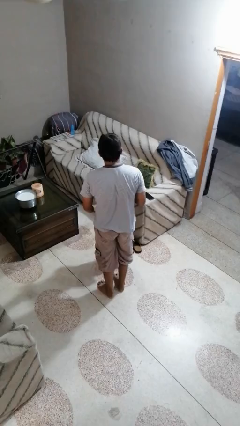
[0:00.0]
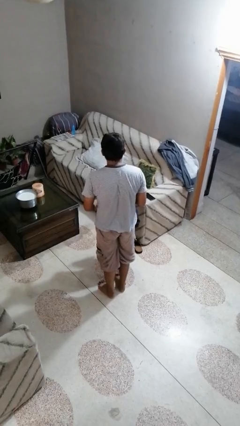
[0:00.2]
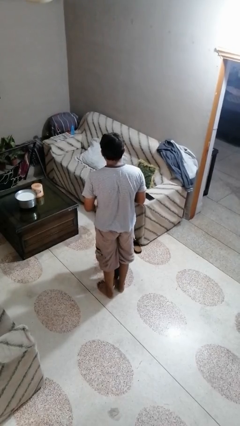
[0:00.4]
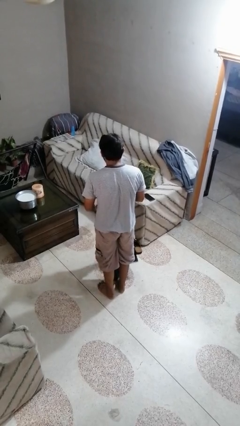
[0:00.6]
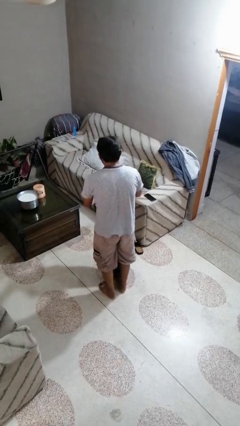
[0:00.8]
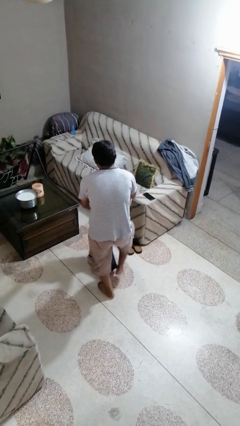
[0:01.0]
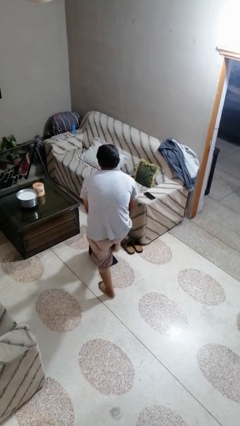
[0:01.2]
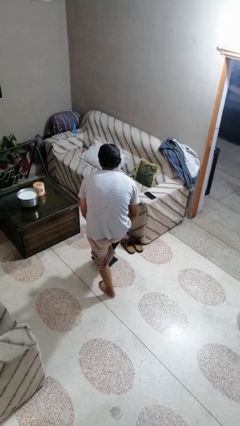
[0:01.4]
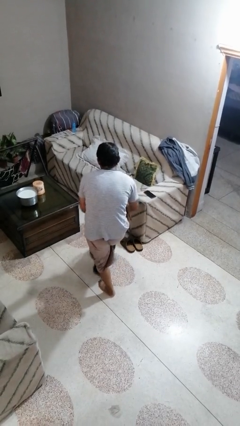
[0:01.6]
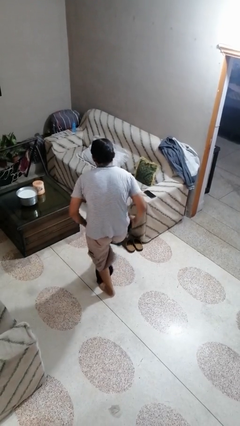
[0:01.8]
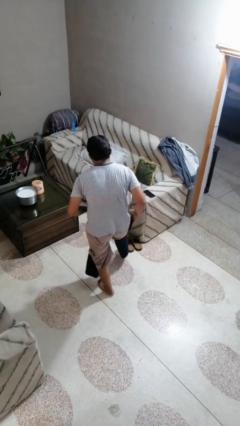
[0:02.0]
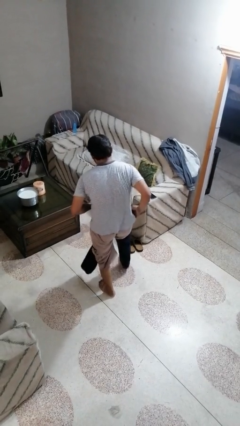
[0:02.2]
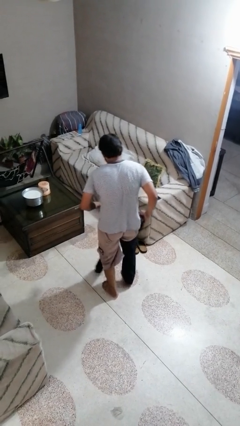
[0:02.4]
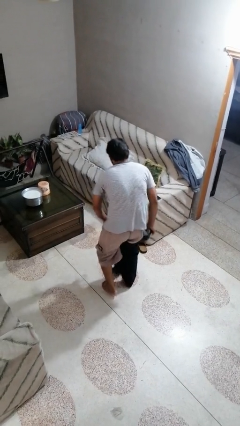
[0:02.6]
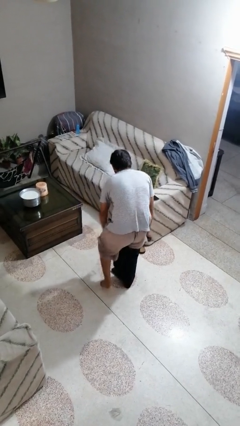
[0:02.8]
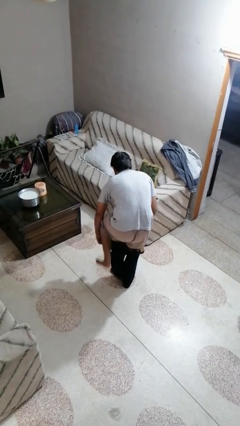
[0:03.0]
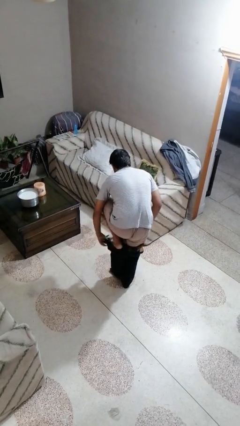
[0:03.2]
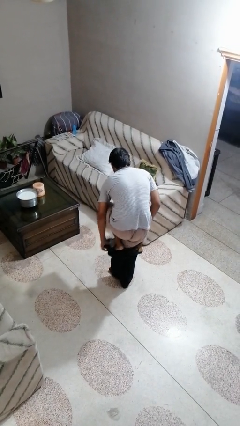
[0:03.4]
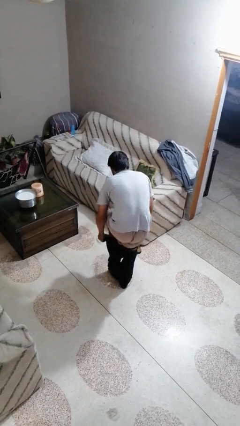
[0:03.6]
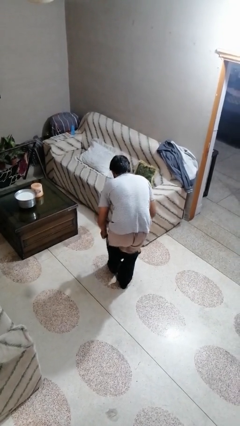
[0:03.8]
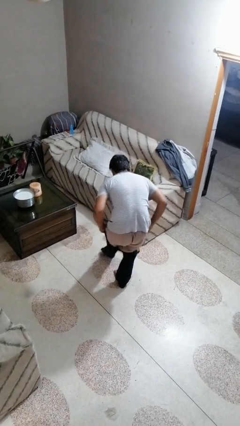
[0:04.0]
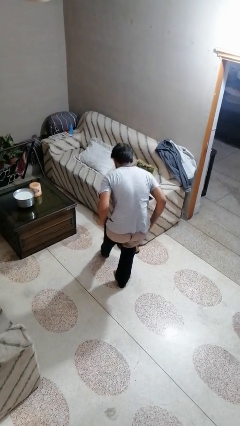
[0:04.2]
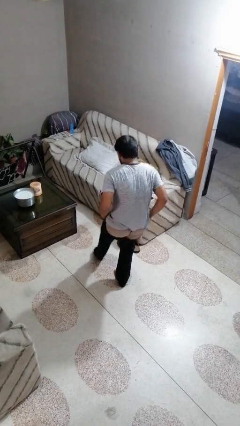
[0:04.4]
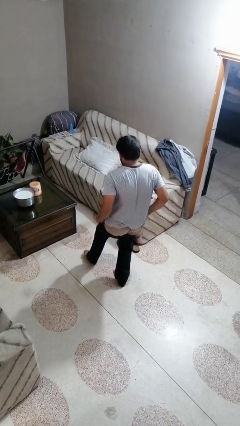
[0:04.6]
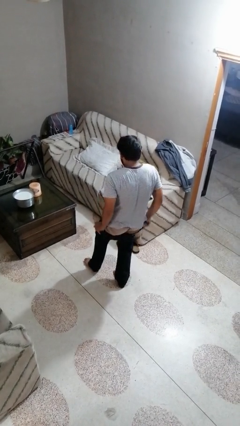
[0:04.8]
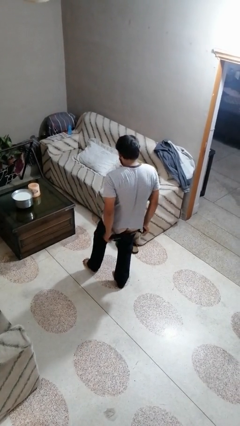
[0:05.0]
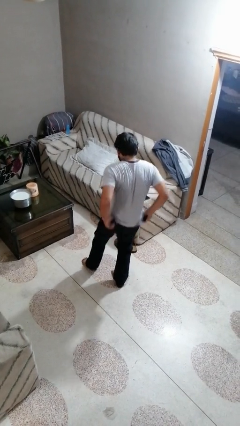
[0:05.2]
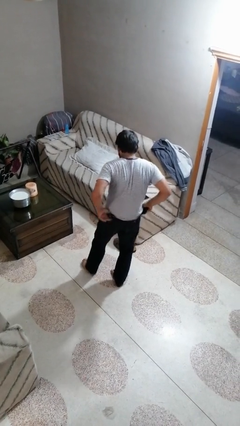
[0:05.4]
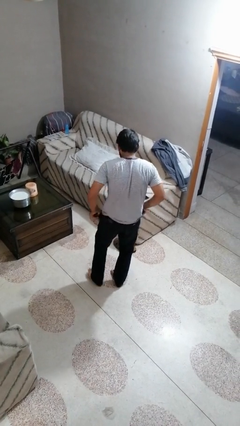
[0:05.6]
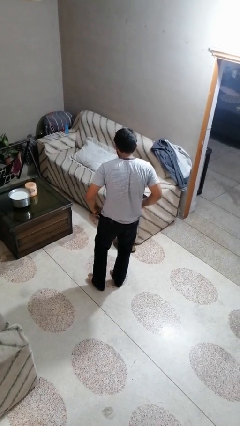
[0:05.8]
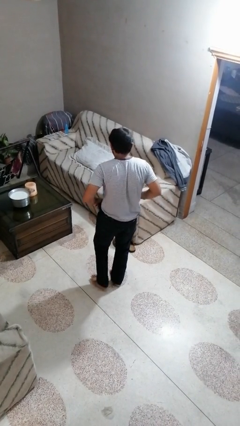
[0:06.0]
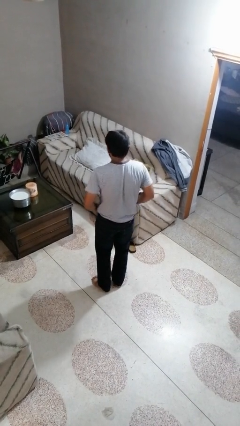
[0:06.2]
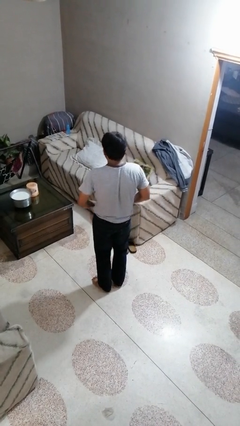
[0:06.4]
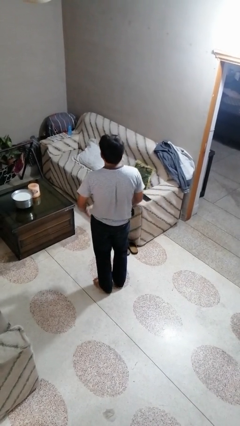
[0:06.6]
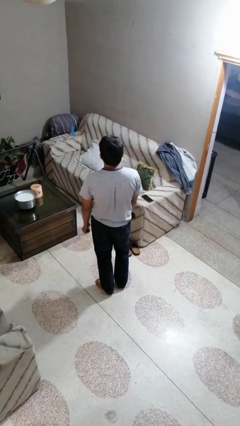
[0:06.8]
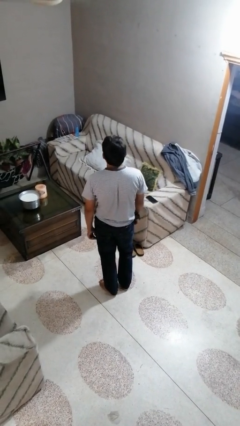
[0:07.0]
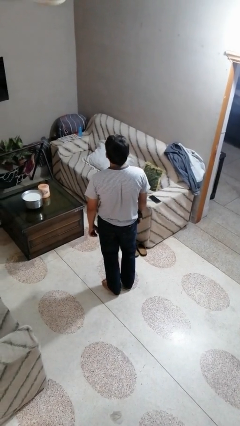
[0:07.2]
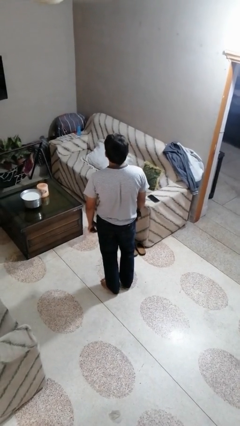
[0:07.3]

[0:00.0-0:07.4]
person puts on pants

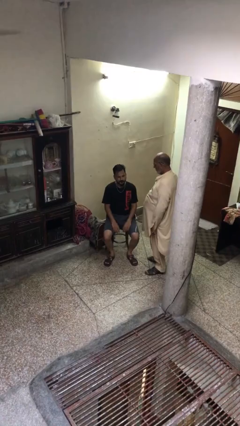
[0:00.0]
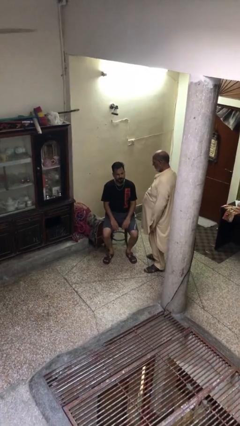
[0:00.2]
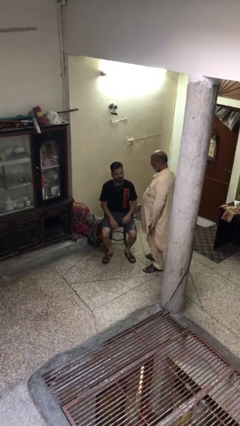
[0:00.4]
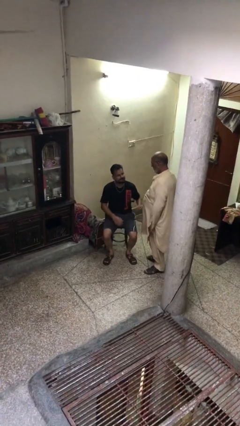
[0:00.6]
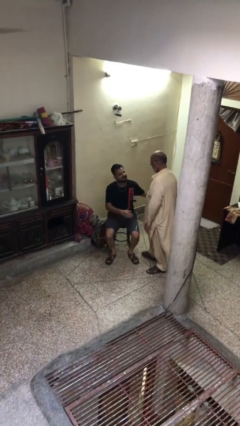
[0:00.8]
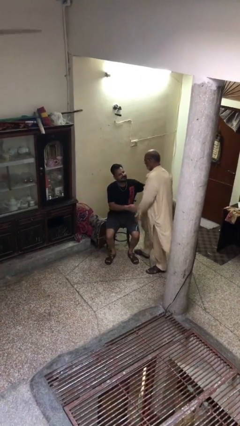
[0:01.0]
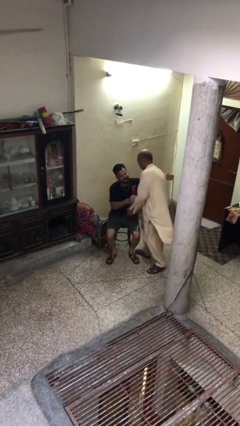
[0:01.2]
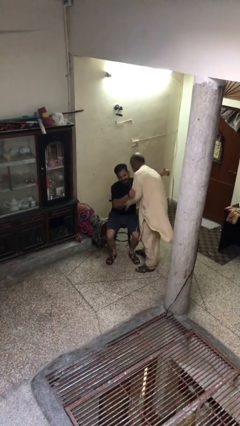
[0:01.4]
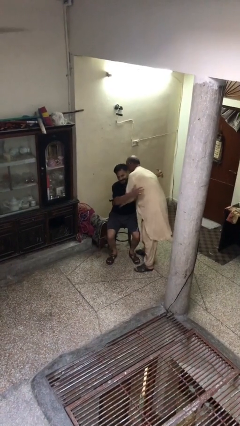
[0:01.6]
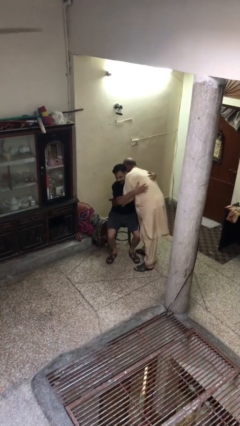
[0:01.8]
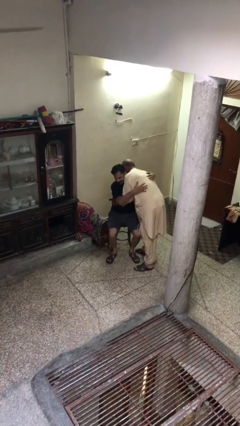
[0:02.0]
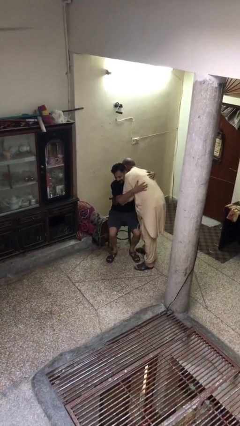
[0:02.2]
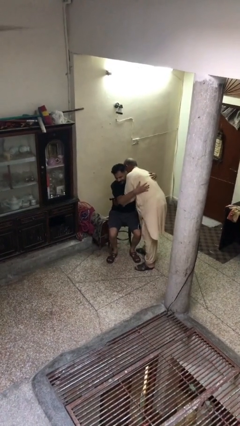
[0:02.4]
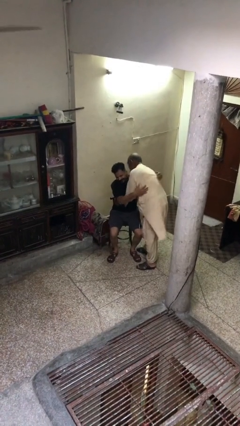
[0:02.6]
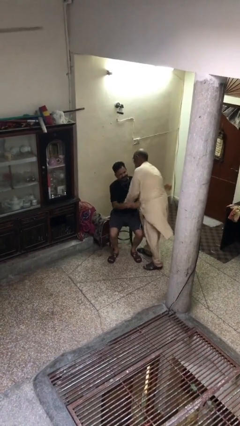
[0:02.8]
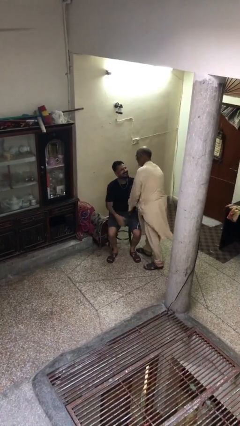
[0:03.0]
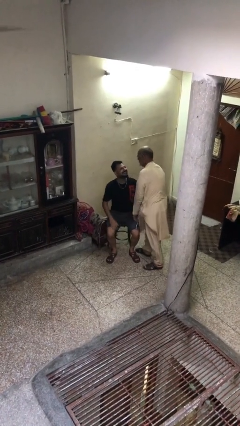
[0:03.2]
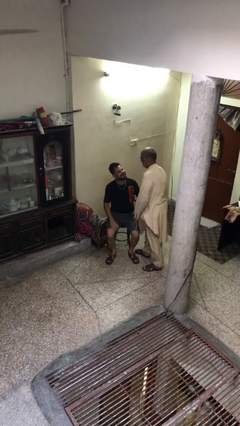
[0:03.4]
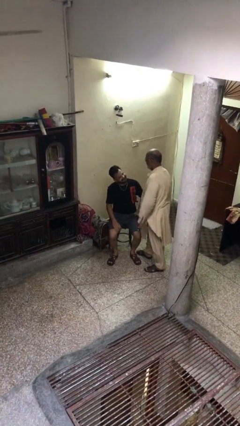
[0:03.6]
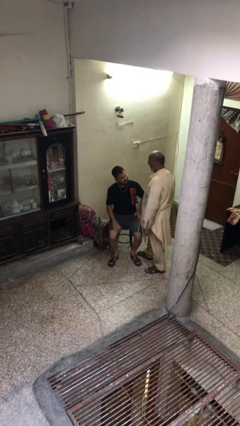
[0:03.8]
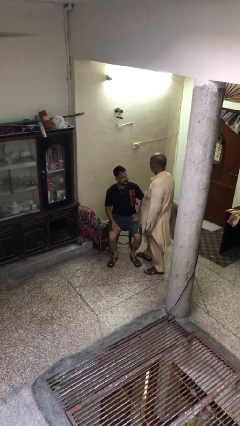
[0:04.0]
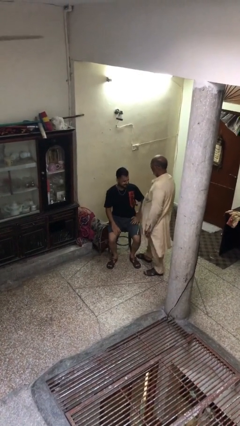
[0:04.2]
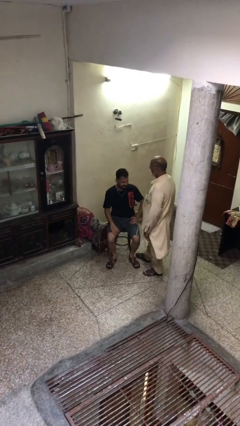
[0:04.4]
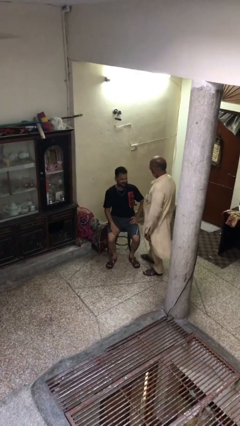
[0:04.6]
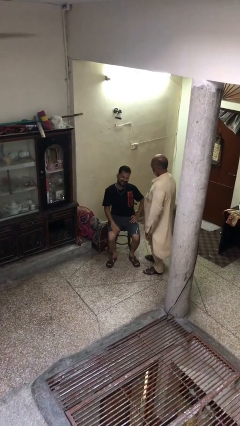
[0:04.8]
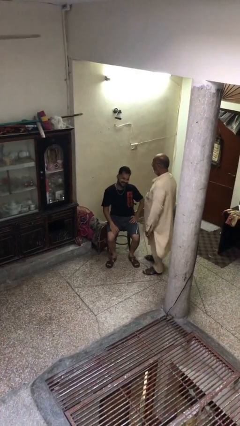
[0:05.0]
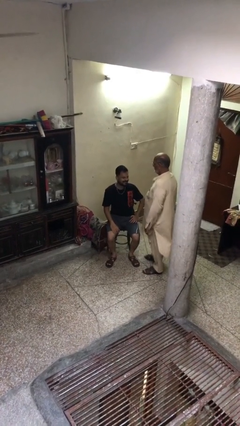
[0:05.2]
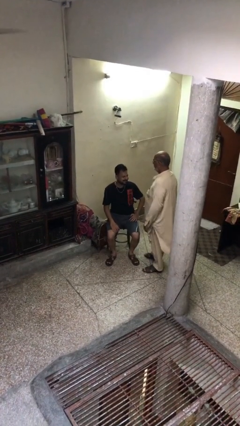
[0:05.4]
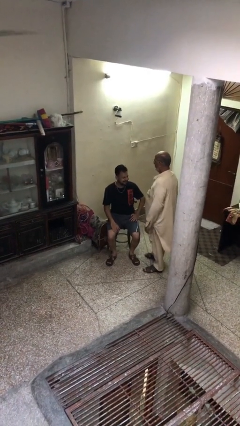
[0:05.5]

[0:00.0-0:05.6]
person embraces person

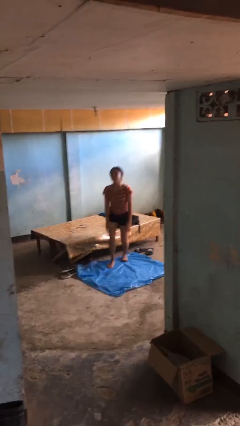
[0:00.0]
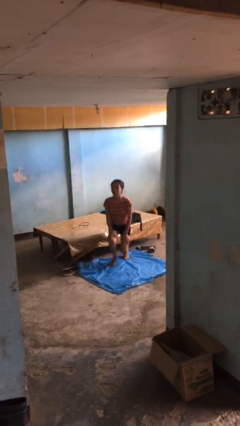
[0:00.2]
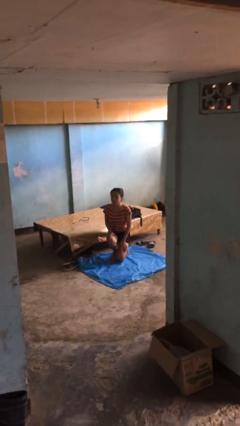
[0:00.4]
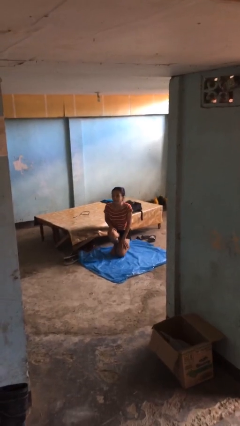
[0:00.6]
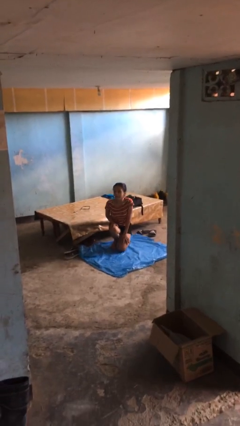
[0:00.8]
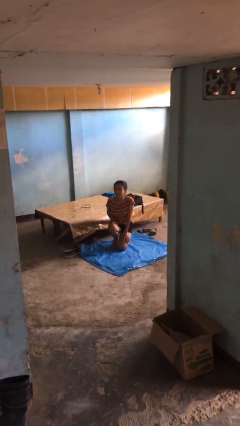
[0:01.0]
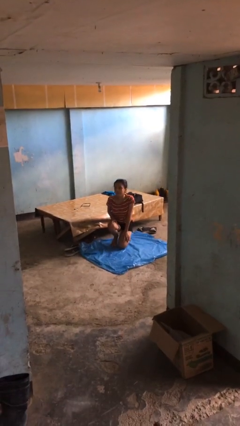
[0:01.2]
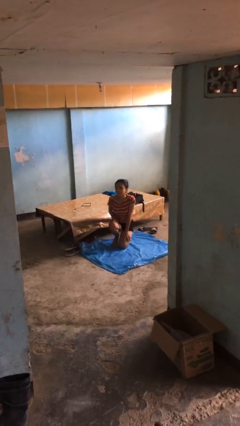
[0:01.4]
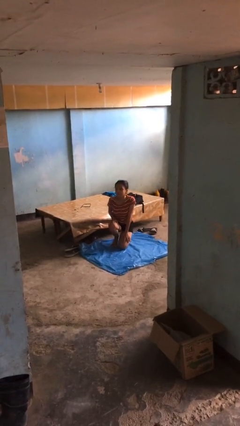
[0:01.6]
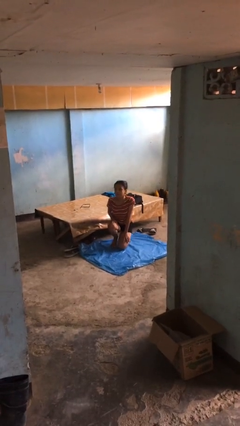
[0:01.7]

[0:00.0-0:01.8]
person kneels

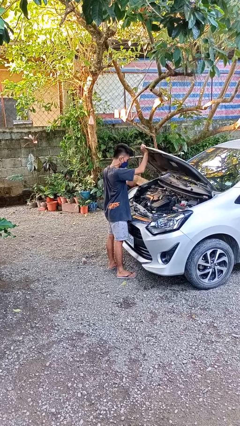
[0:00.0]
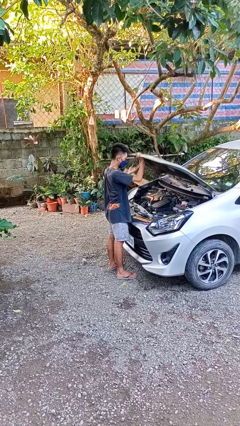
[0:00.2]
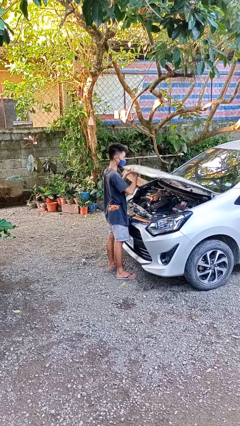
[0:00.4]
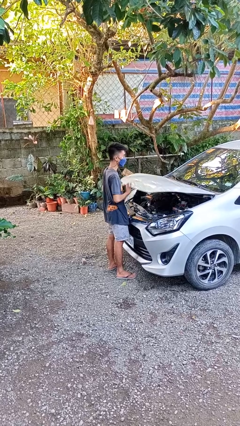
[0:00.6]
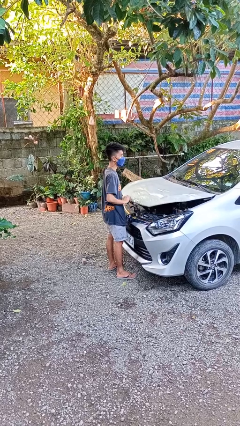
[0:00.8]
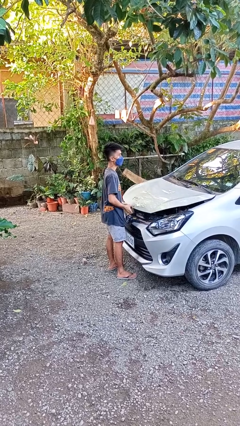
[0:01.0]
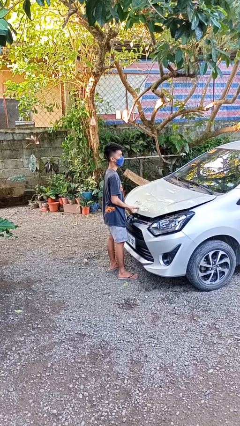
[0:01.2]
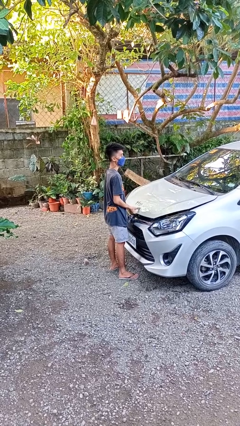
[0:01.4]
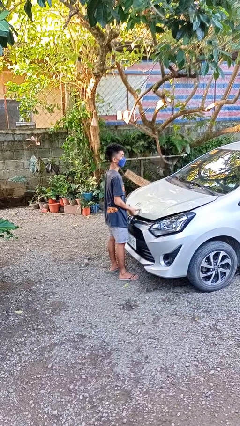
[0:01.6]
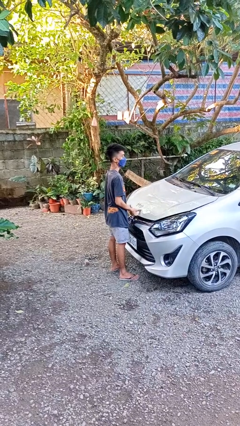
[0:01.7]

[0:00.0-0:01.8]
person closes car hood

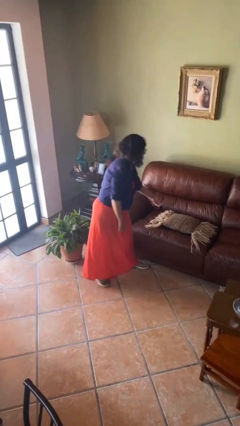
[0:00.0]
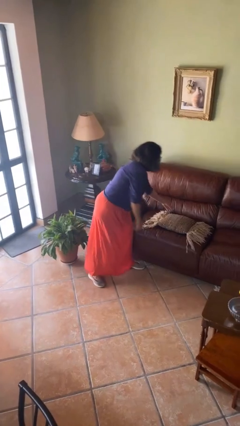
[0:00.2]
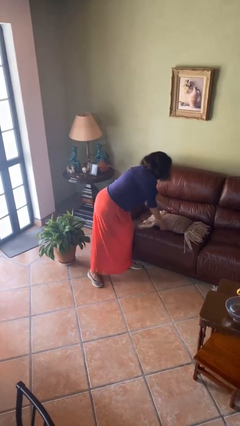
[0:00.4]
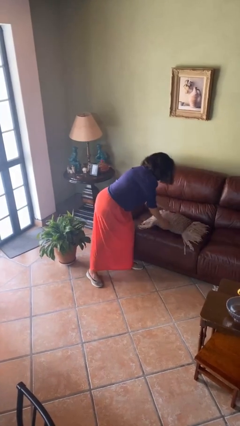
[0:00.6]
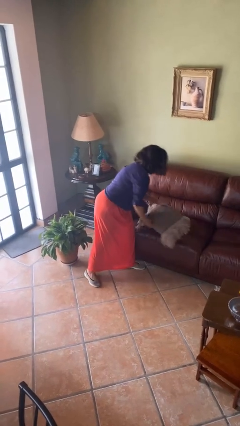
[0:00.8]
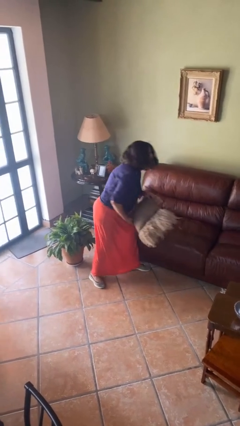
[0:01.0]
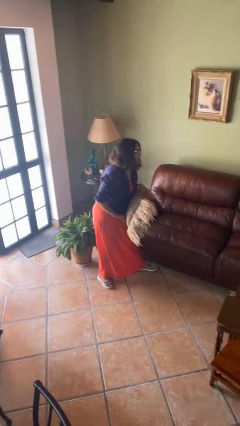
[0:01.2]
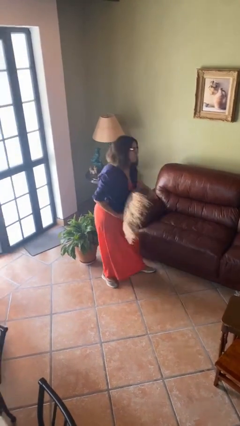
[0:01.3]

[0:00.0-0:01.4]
person picks up object from couch
